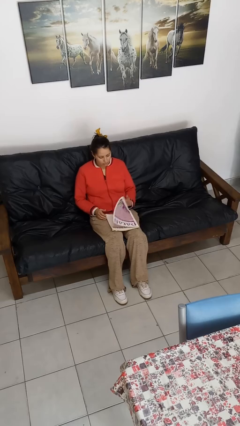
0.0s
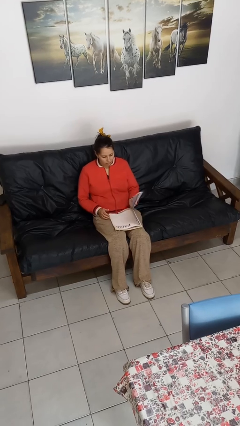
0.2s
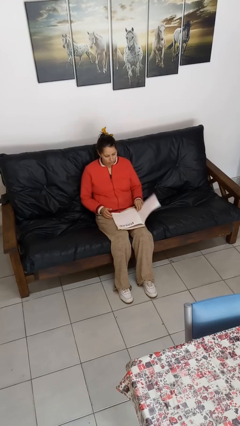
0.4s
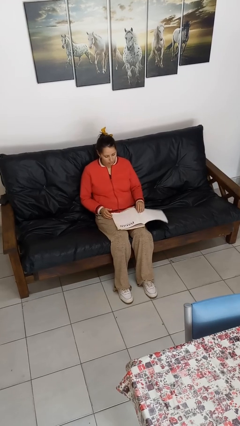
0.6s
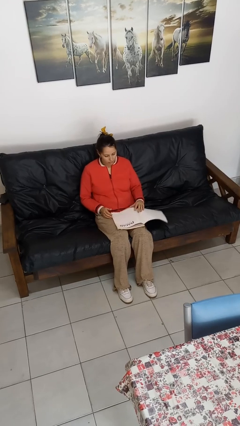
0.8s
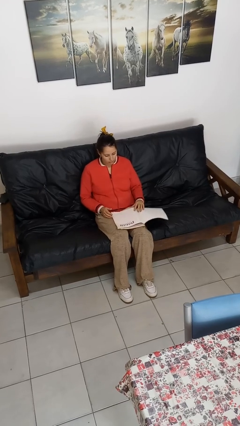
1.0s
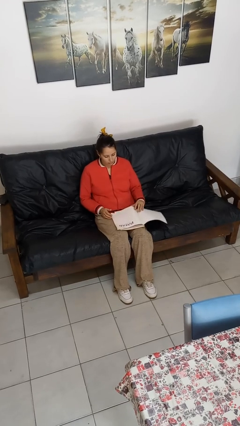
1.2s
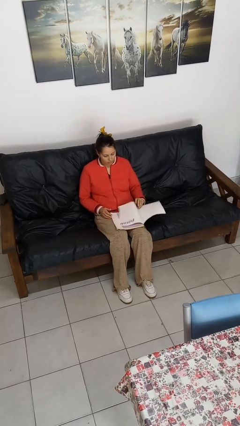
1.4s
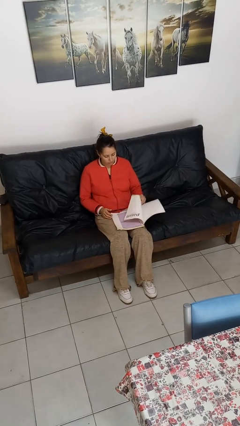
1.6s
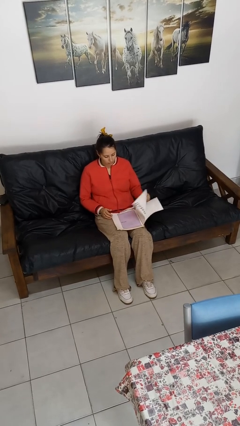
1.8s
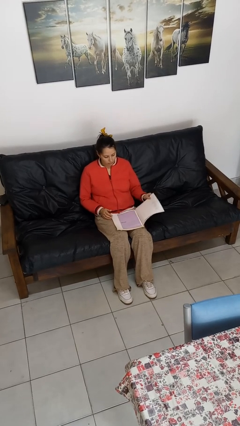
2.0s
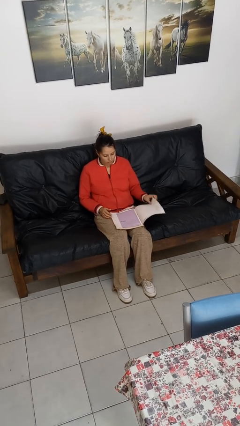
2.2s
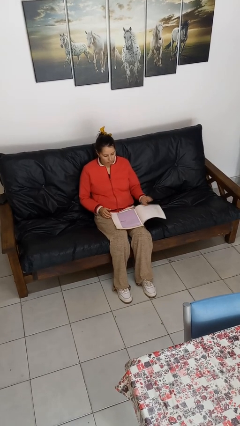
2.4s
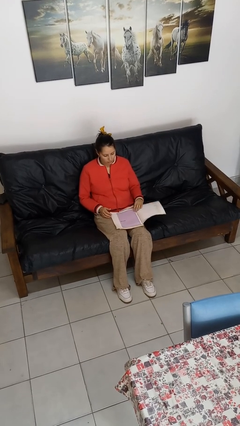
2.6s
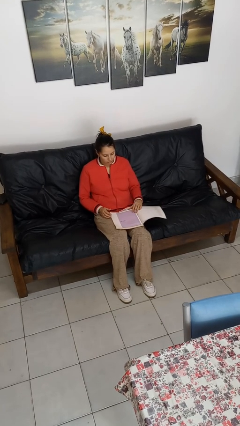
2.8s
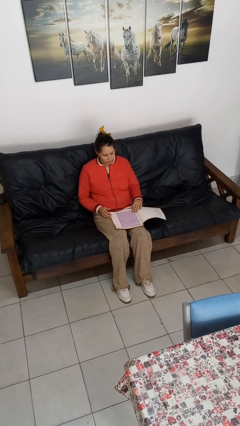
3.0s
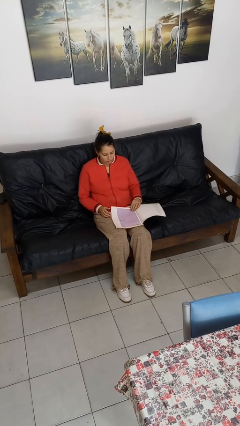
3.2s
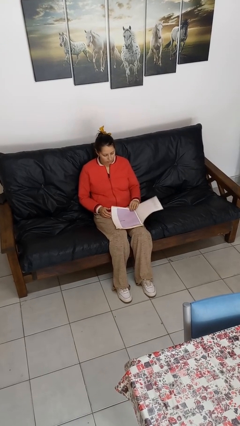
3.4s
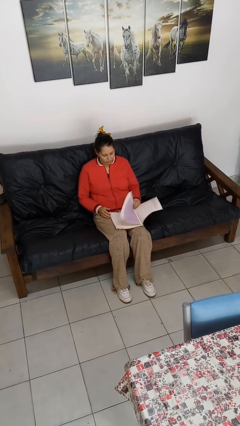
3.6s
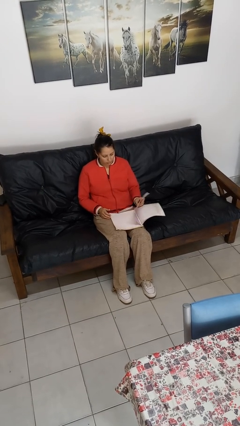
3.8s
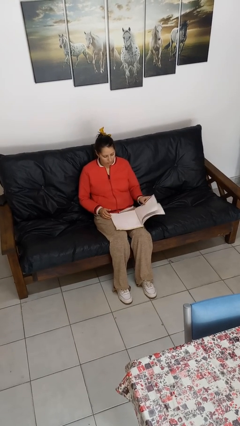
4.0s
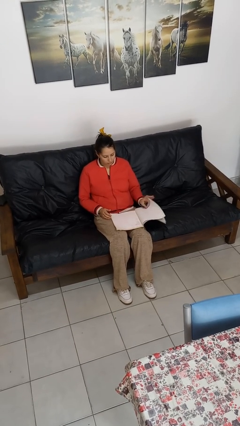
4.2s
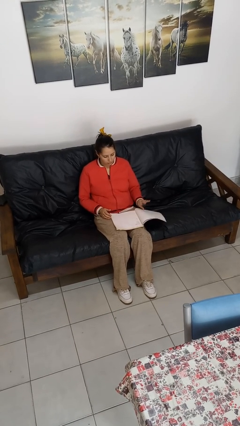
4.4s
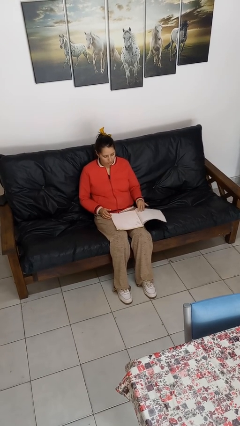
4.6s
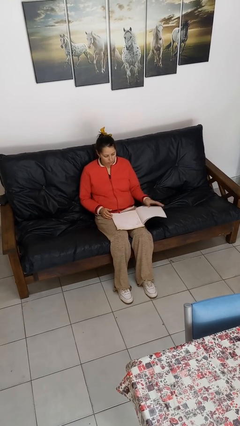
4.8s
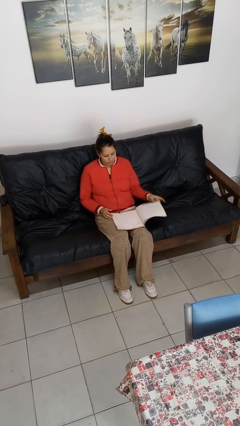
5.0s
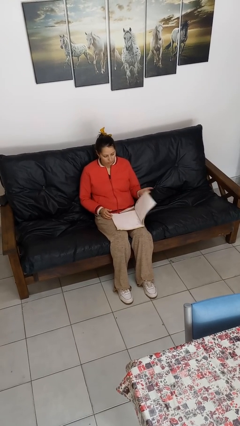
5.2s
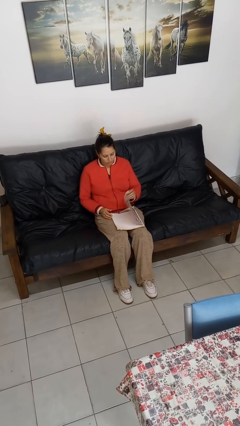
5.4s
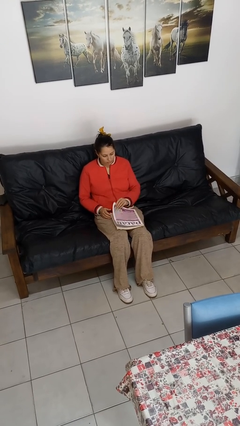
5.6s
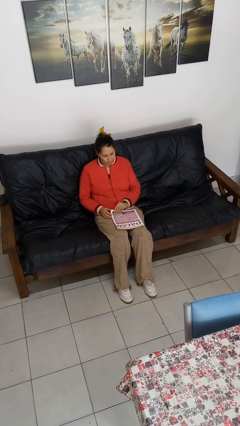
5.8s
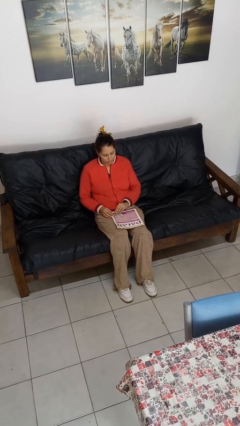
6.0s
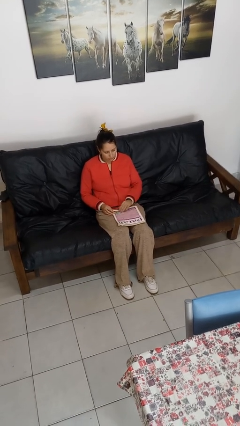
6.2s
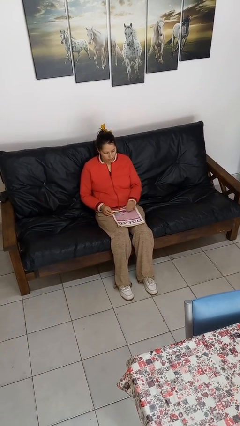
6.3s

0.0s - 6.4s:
person reads magazine

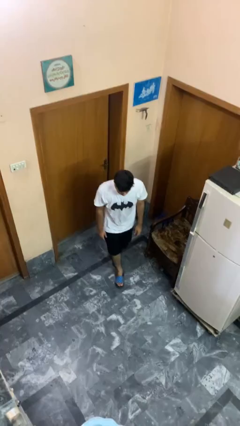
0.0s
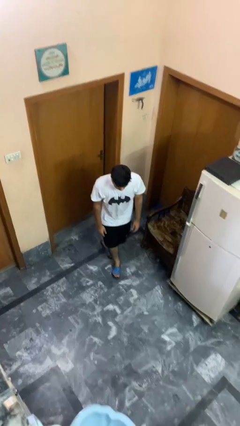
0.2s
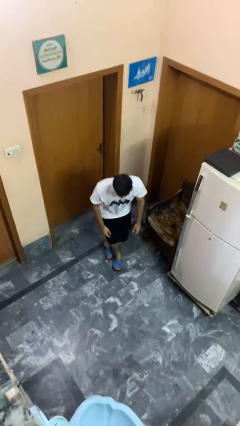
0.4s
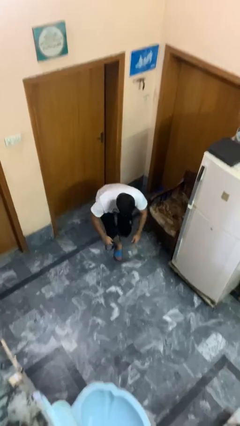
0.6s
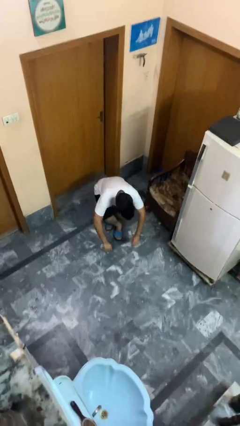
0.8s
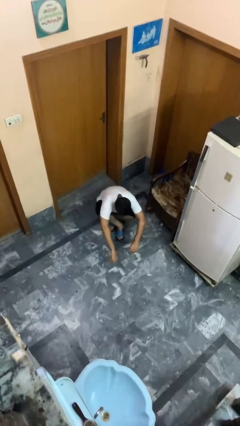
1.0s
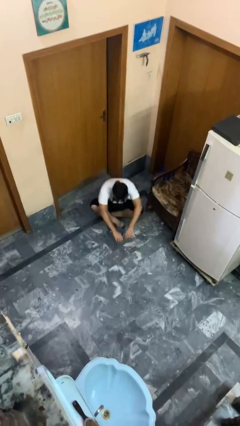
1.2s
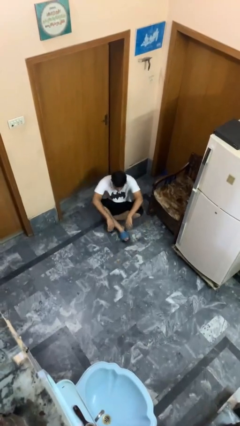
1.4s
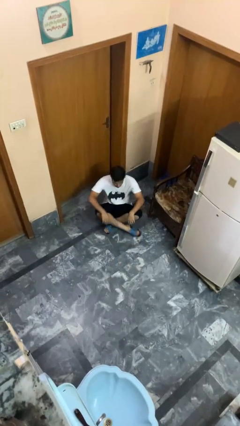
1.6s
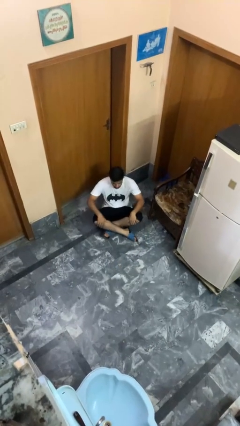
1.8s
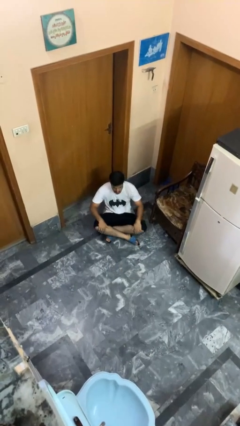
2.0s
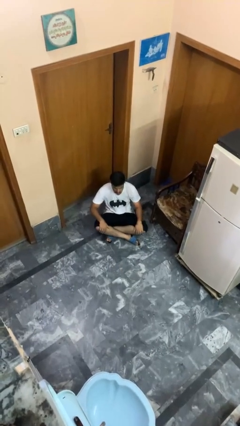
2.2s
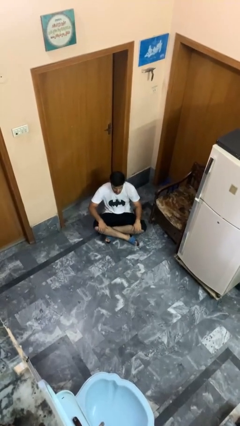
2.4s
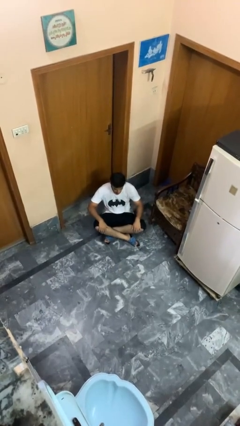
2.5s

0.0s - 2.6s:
person sits crisscross

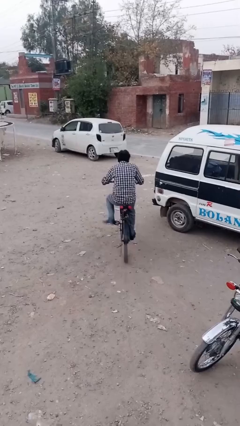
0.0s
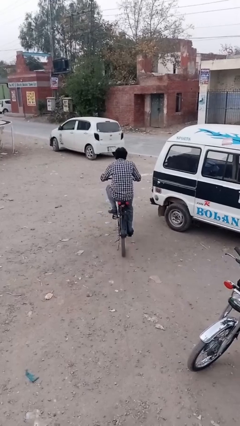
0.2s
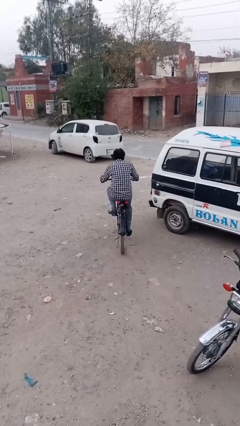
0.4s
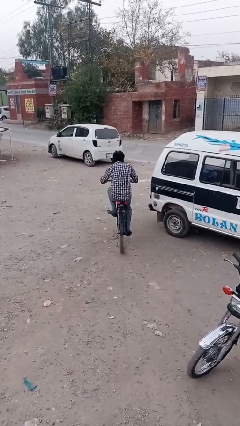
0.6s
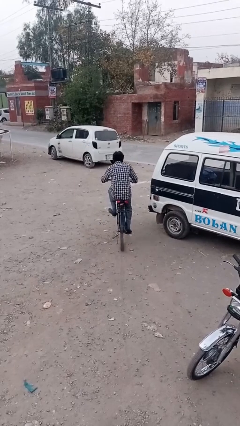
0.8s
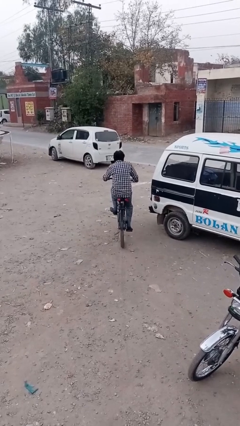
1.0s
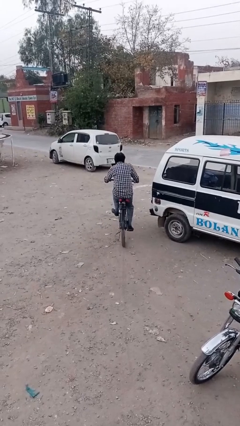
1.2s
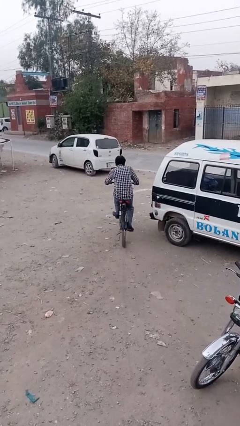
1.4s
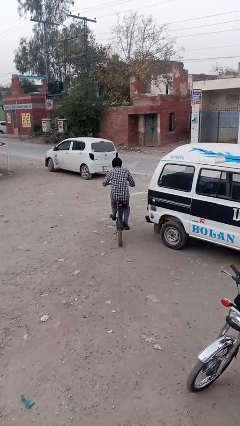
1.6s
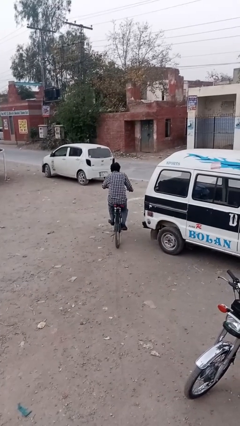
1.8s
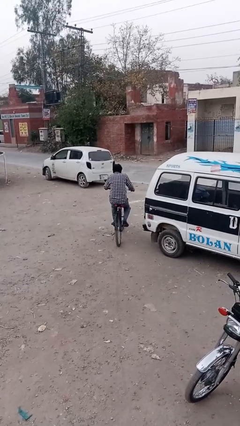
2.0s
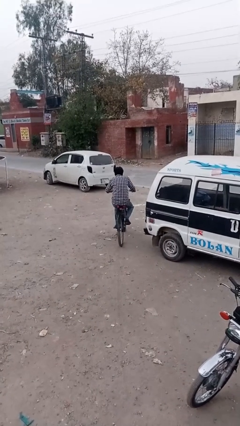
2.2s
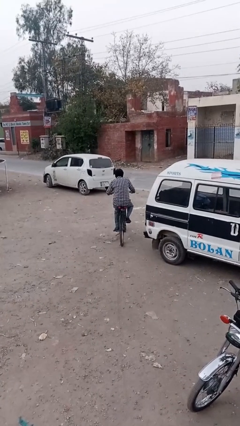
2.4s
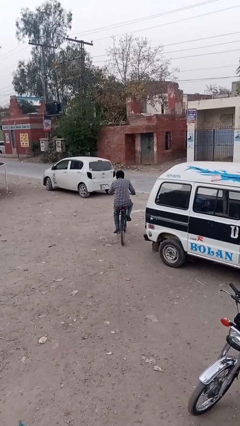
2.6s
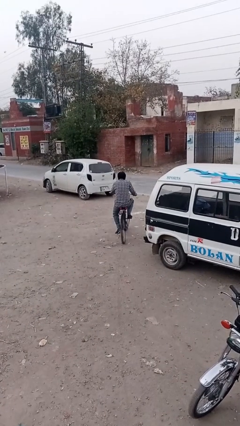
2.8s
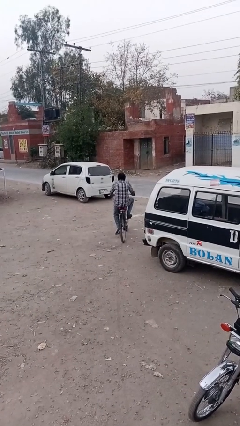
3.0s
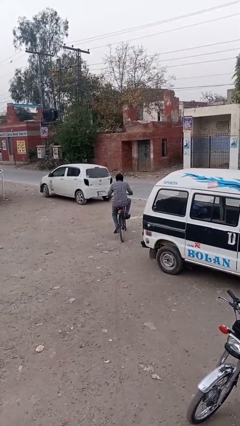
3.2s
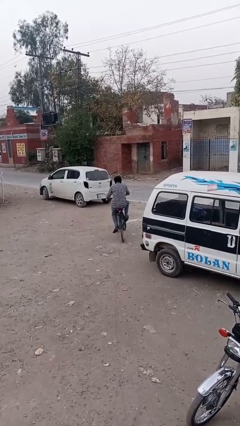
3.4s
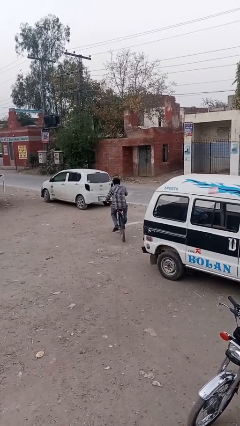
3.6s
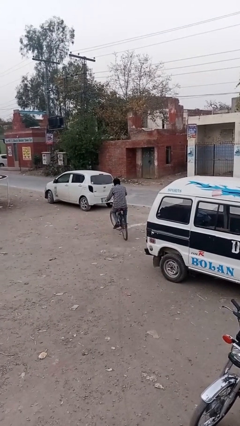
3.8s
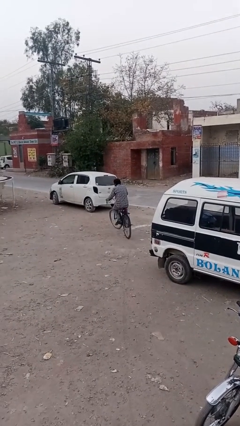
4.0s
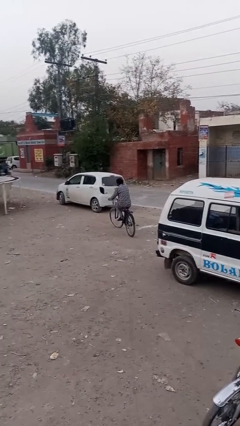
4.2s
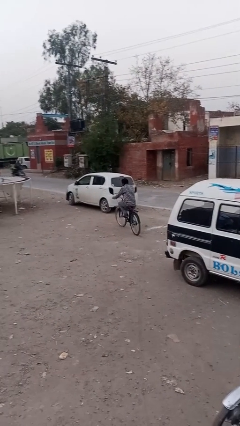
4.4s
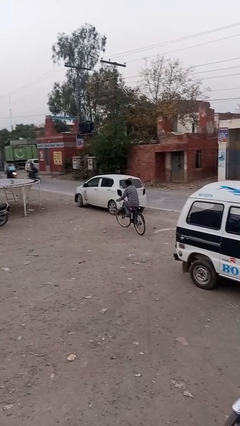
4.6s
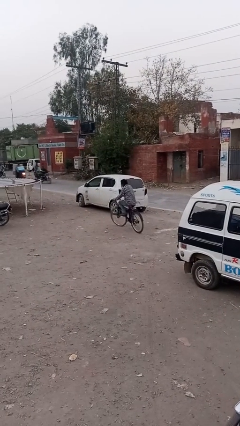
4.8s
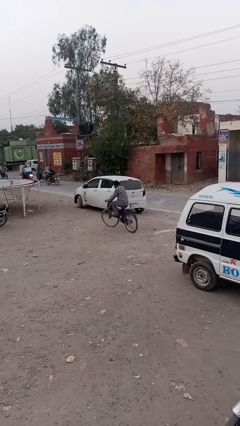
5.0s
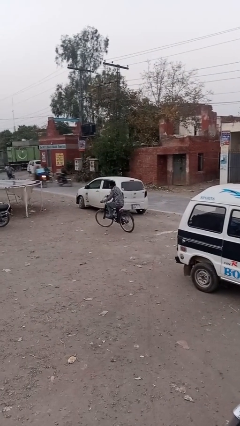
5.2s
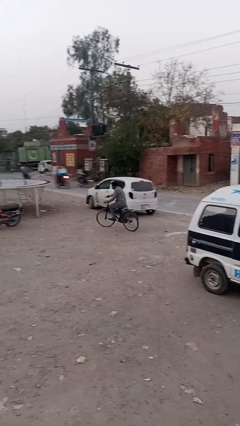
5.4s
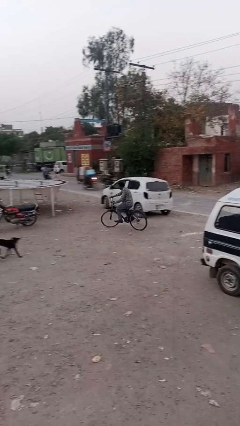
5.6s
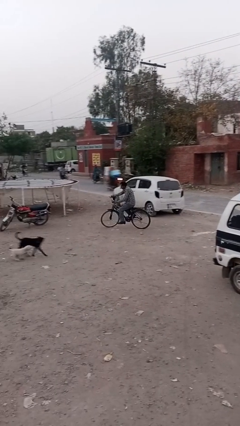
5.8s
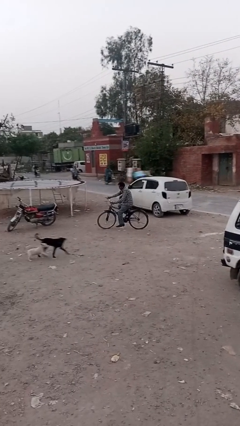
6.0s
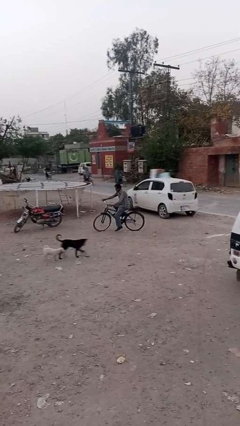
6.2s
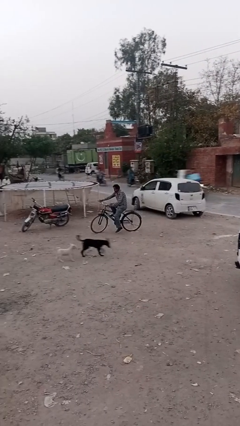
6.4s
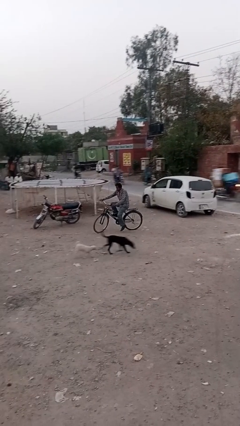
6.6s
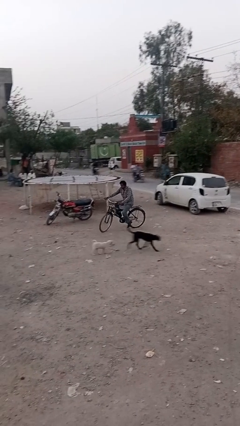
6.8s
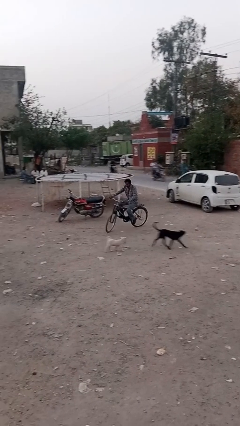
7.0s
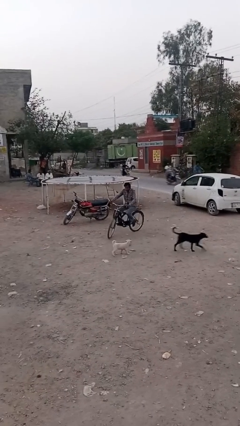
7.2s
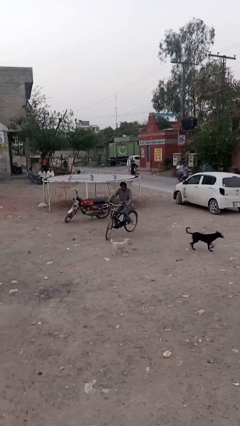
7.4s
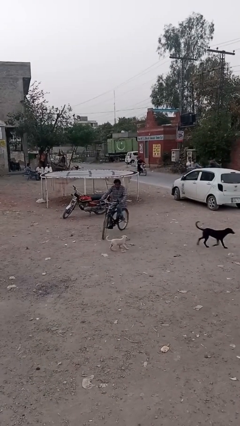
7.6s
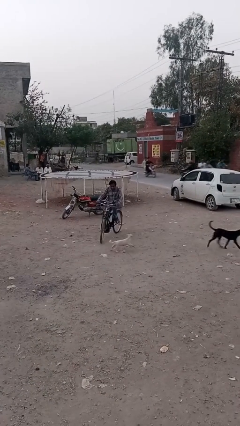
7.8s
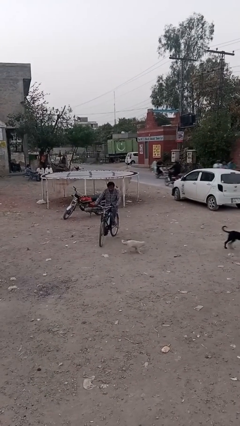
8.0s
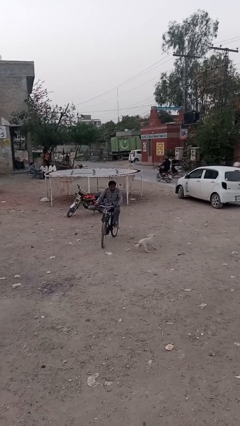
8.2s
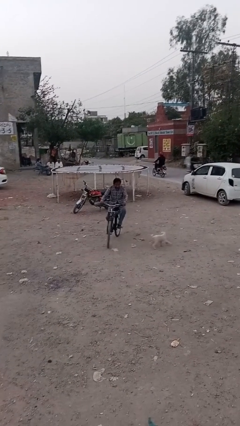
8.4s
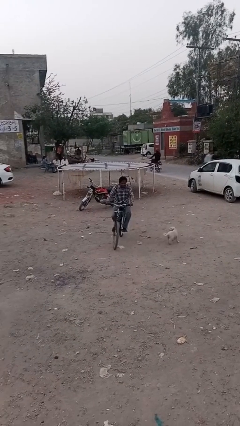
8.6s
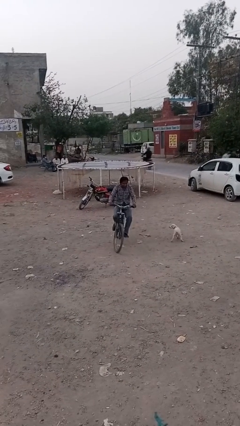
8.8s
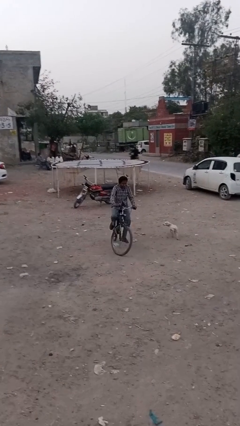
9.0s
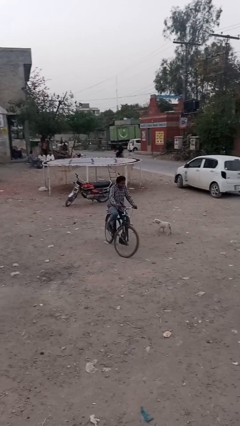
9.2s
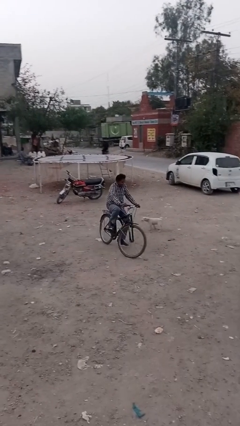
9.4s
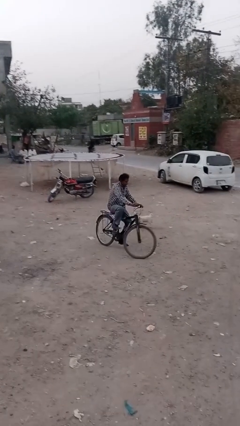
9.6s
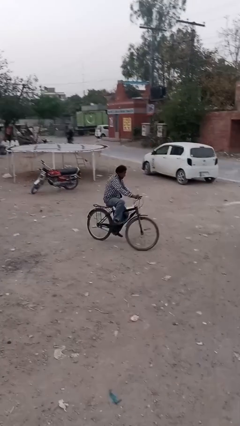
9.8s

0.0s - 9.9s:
person rides bicycle
